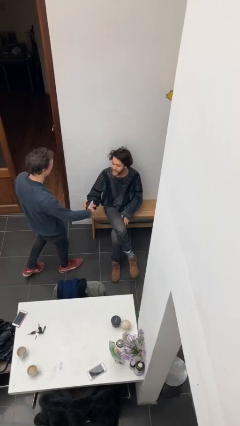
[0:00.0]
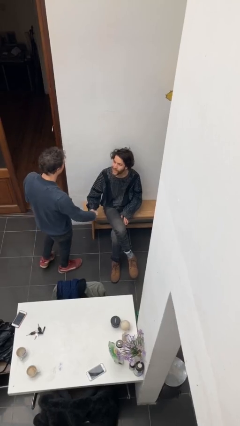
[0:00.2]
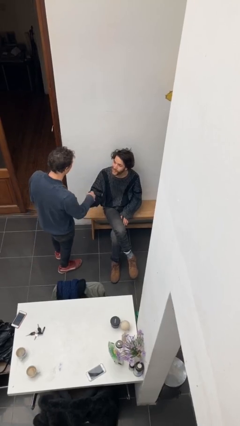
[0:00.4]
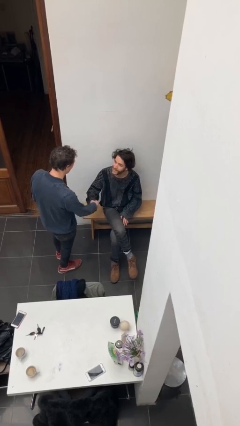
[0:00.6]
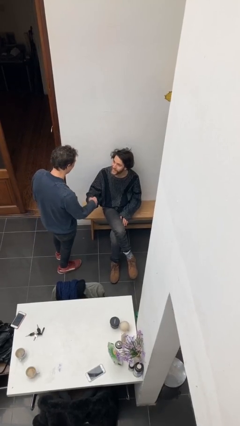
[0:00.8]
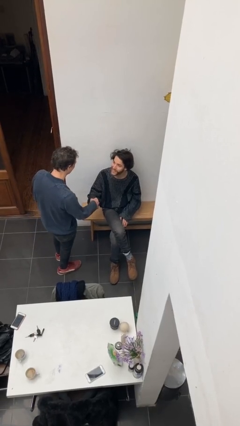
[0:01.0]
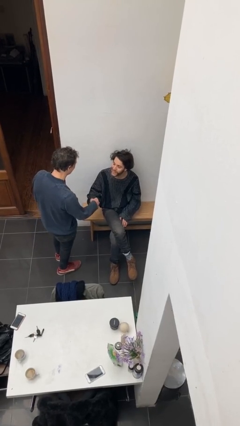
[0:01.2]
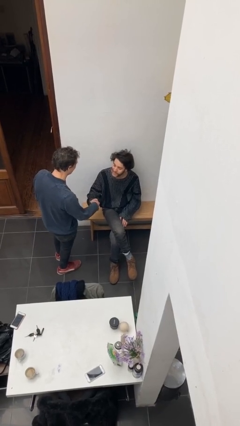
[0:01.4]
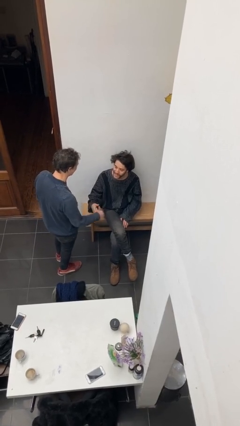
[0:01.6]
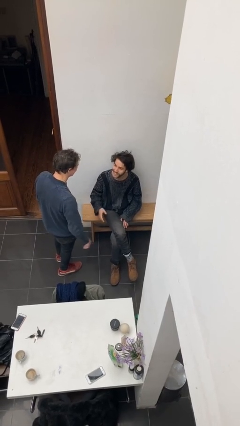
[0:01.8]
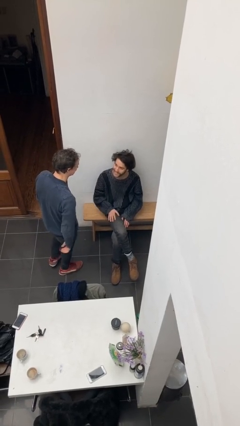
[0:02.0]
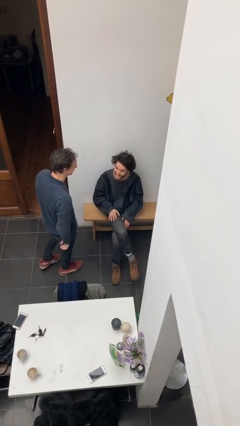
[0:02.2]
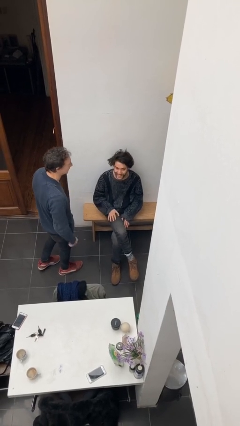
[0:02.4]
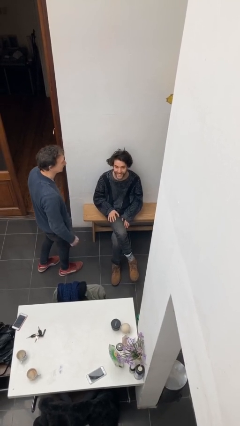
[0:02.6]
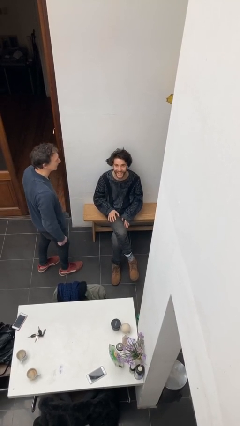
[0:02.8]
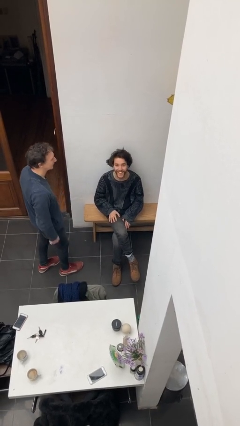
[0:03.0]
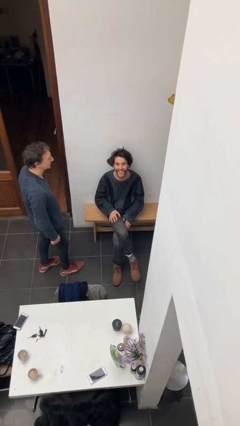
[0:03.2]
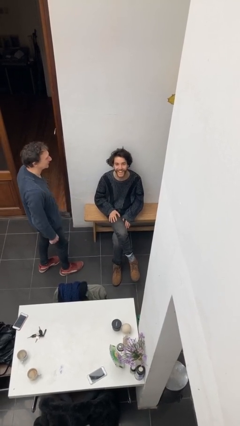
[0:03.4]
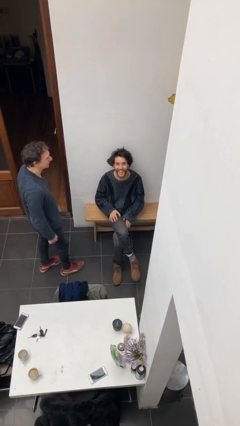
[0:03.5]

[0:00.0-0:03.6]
person shakes hand

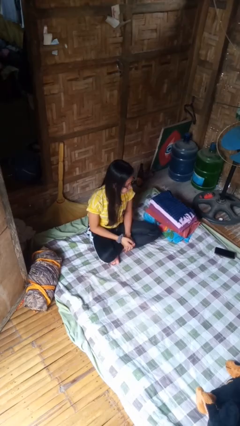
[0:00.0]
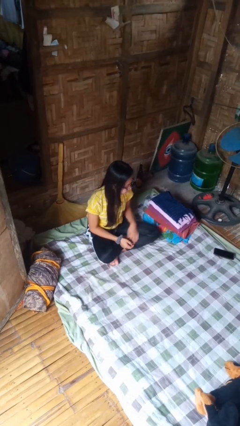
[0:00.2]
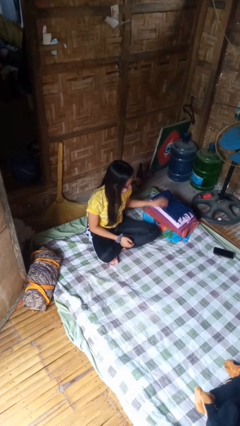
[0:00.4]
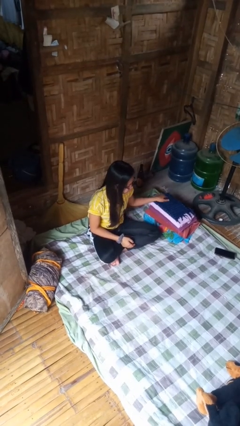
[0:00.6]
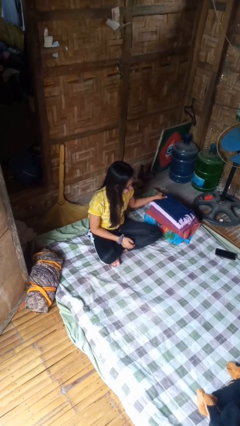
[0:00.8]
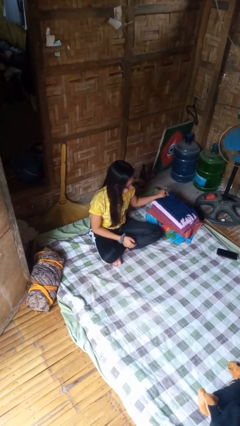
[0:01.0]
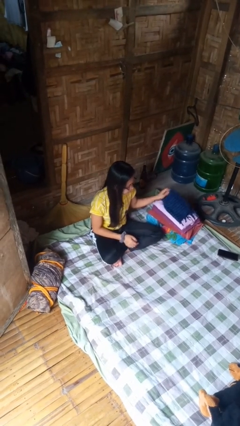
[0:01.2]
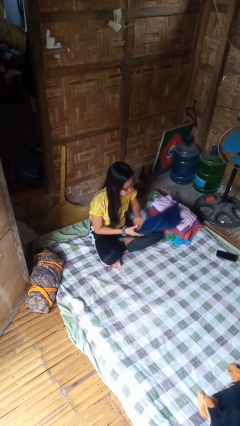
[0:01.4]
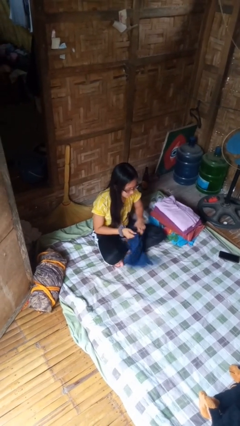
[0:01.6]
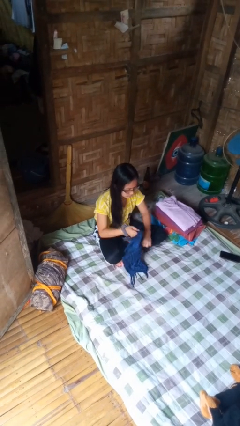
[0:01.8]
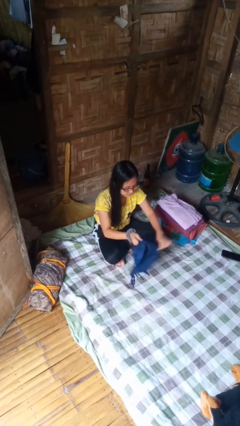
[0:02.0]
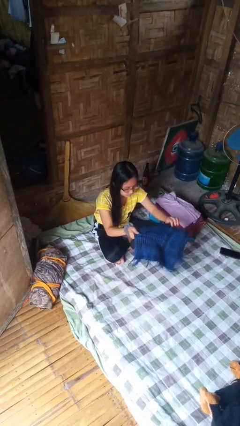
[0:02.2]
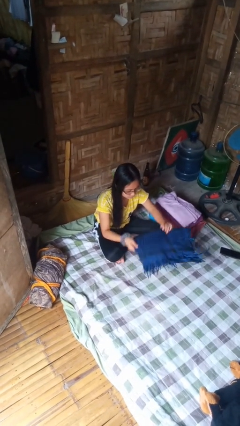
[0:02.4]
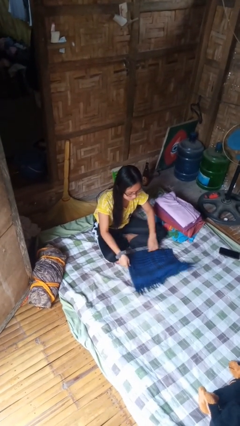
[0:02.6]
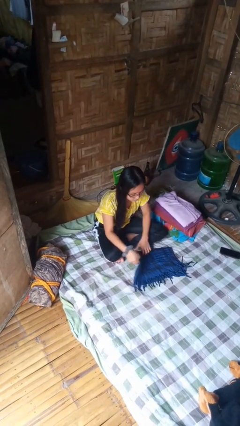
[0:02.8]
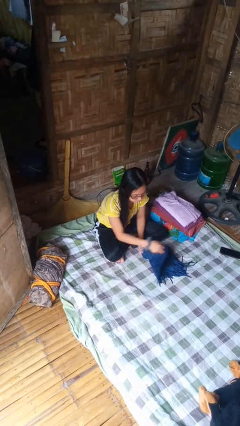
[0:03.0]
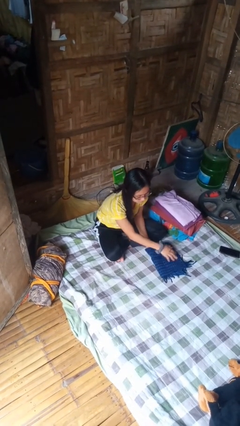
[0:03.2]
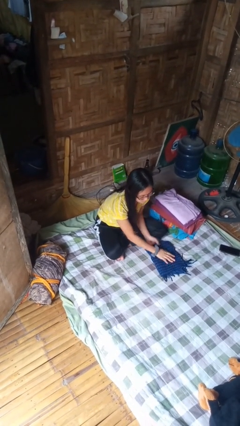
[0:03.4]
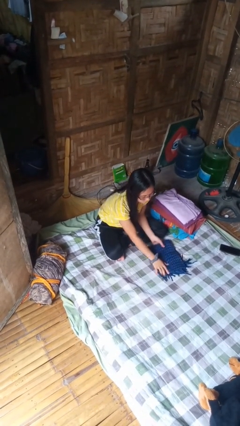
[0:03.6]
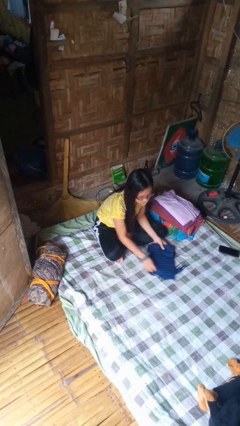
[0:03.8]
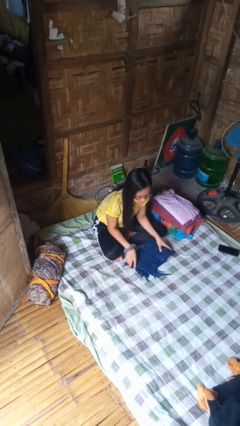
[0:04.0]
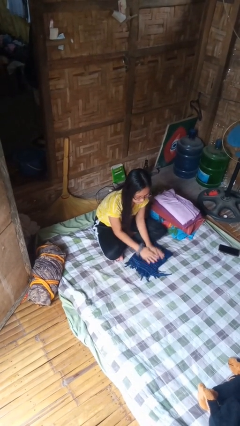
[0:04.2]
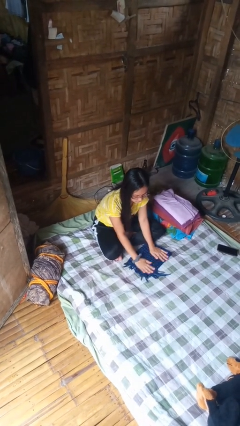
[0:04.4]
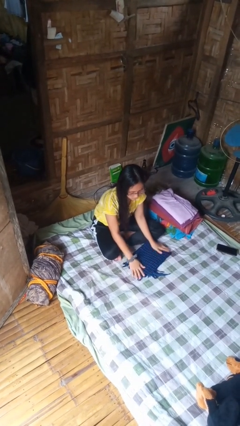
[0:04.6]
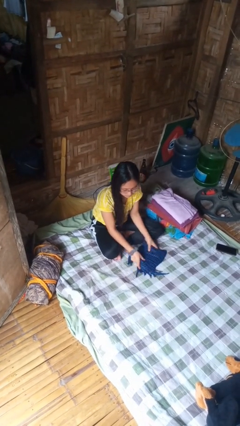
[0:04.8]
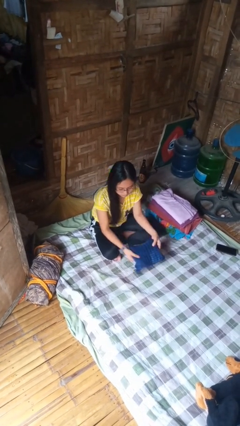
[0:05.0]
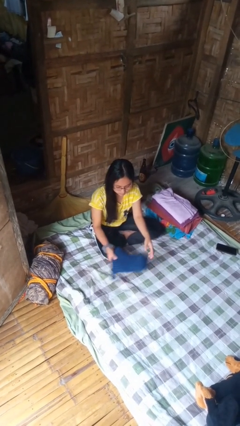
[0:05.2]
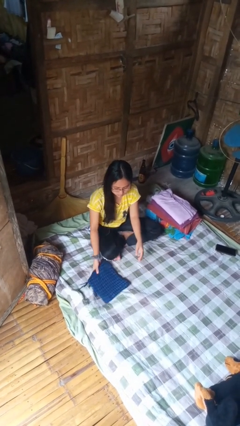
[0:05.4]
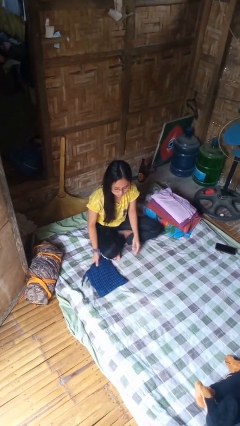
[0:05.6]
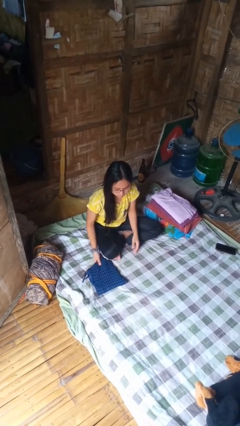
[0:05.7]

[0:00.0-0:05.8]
person folds towel

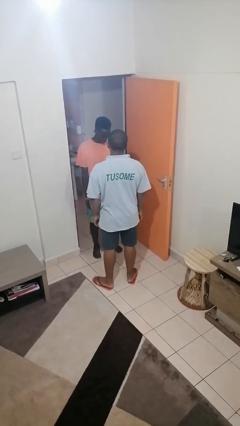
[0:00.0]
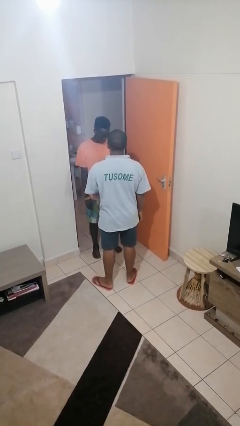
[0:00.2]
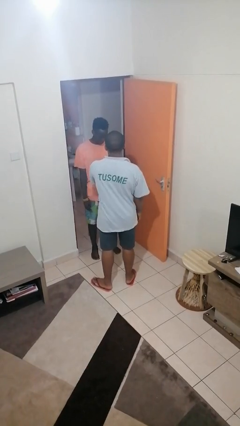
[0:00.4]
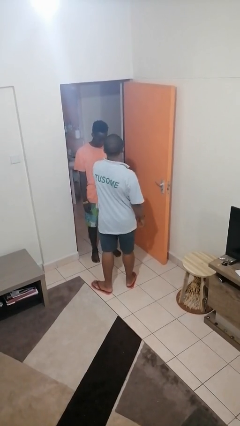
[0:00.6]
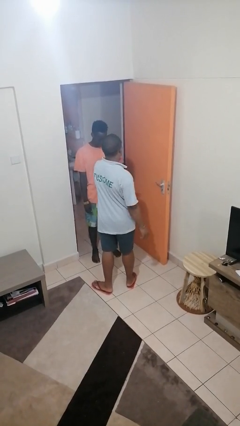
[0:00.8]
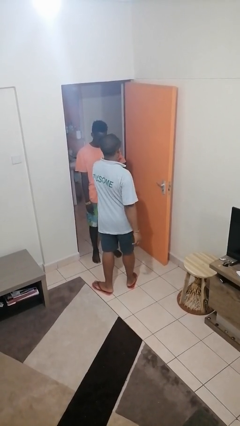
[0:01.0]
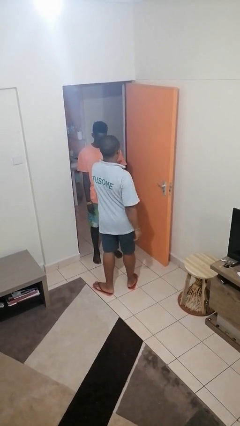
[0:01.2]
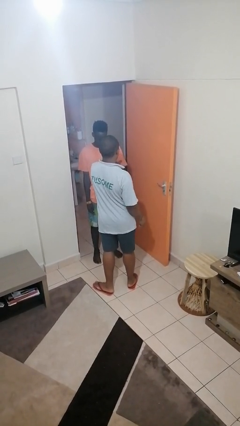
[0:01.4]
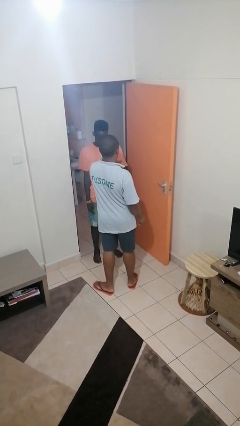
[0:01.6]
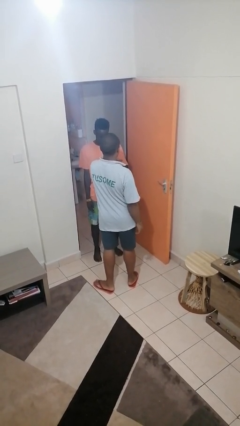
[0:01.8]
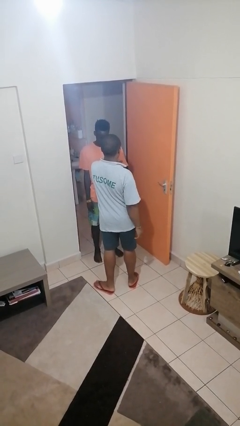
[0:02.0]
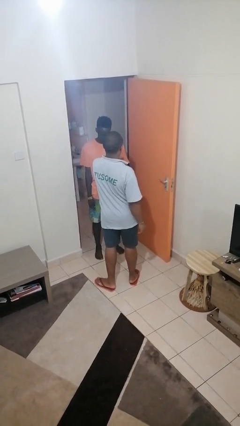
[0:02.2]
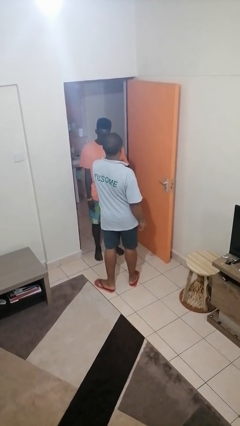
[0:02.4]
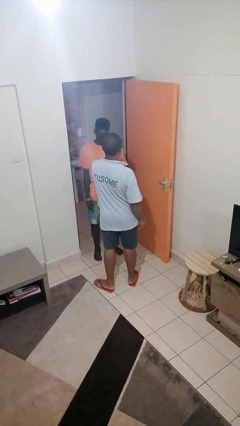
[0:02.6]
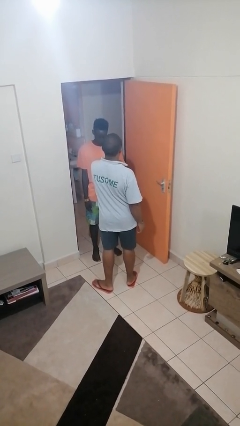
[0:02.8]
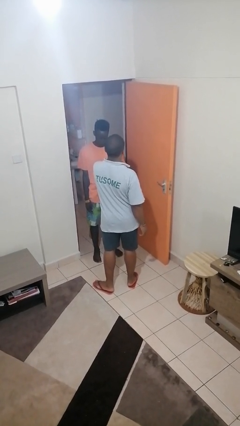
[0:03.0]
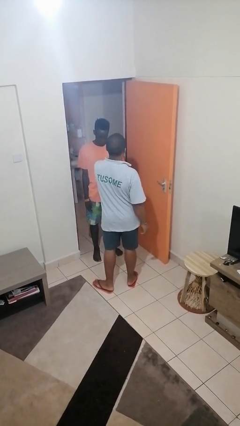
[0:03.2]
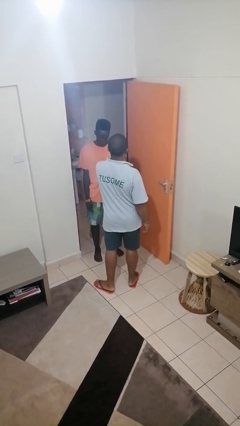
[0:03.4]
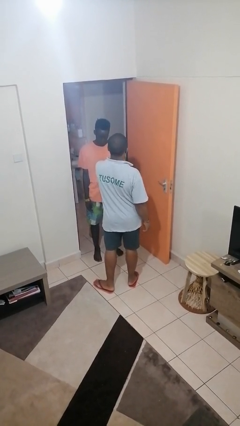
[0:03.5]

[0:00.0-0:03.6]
person grabs person by bicep

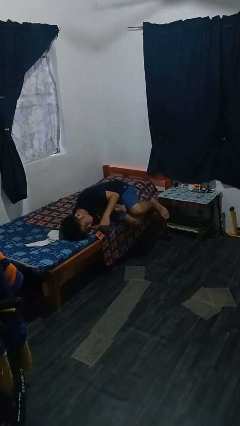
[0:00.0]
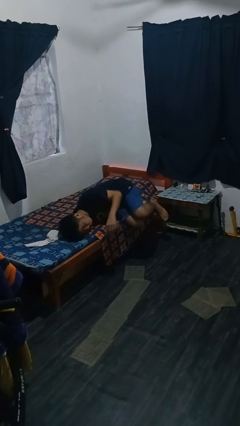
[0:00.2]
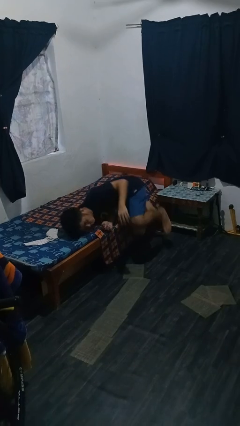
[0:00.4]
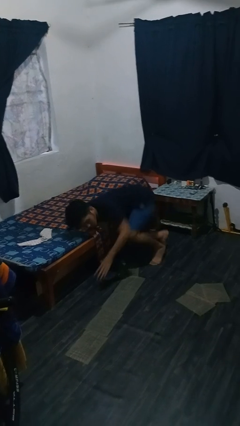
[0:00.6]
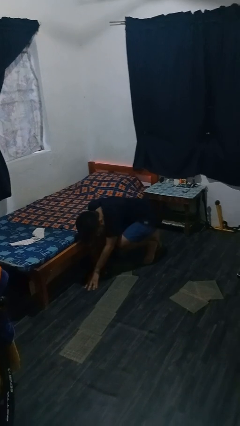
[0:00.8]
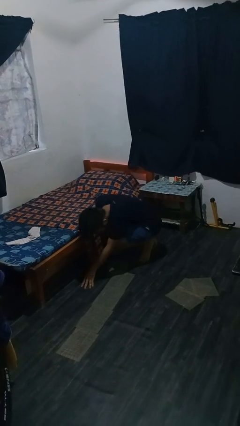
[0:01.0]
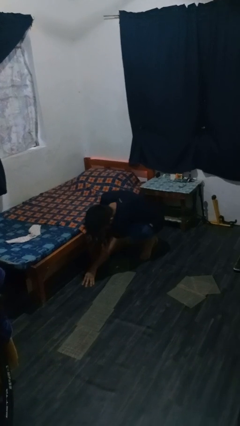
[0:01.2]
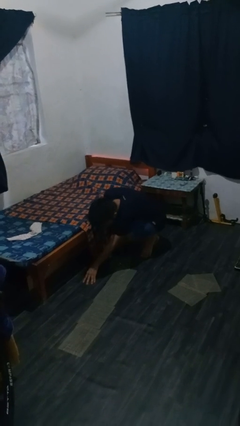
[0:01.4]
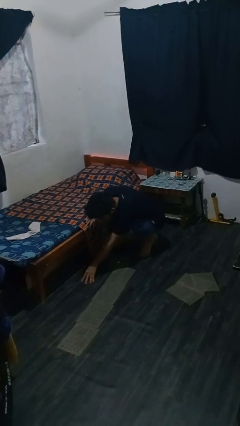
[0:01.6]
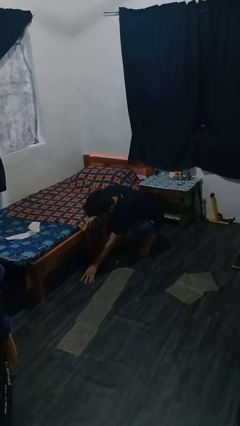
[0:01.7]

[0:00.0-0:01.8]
person falls from bed

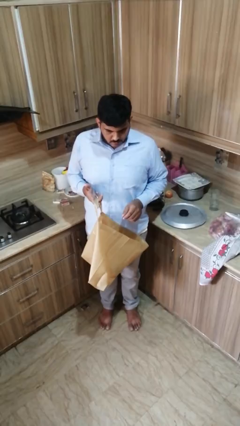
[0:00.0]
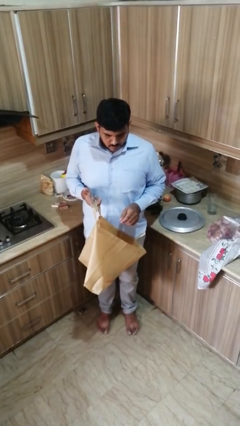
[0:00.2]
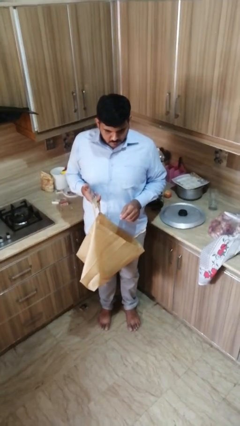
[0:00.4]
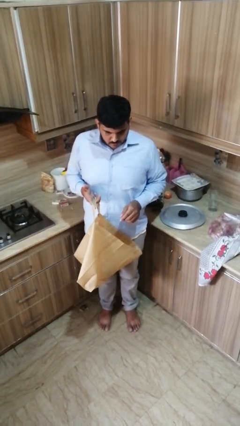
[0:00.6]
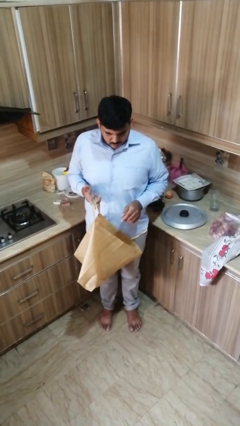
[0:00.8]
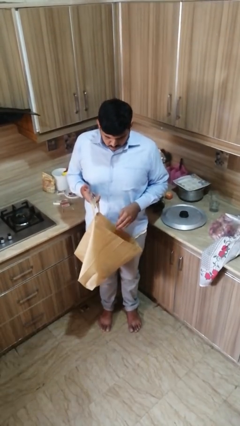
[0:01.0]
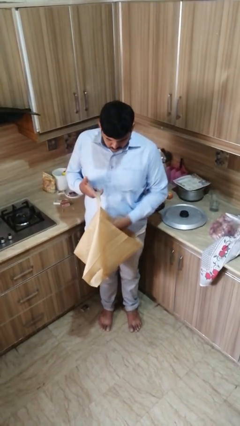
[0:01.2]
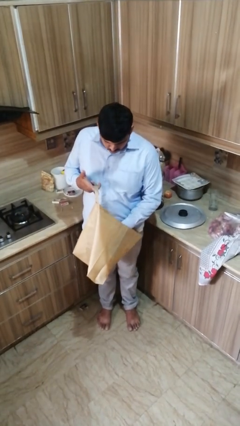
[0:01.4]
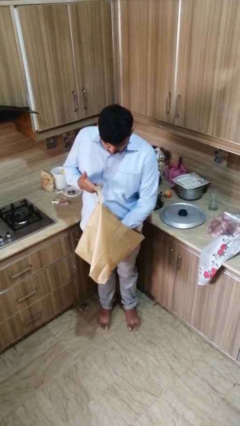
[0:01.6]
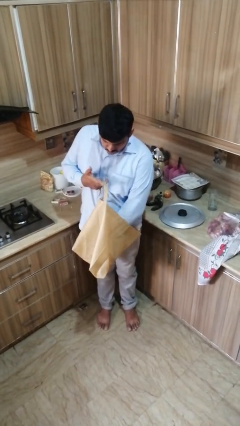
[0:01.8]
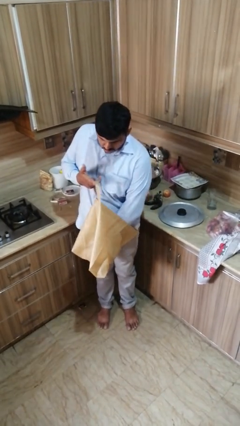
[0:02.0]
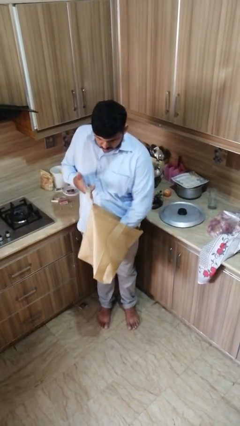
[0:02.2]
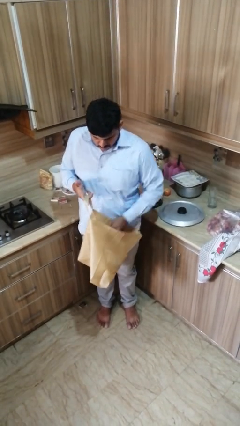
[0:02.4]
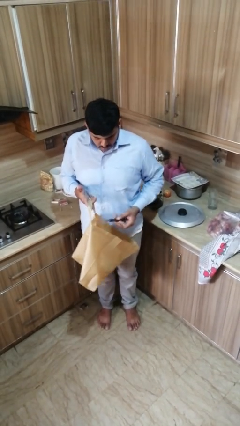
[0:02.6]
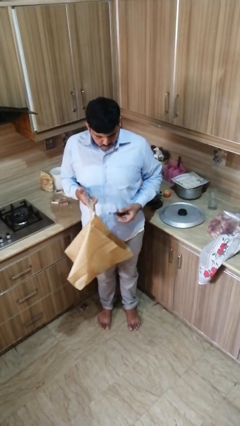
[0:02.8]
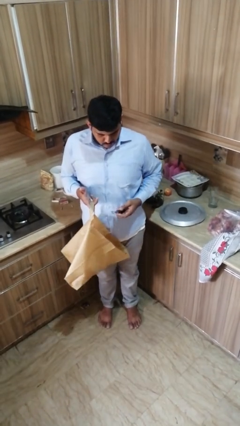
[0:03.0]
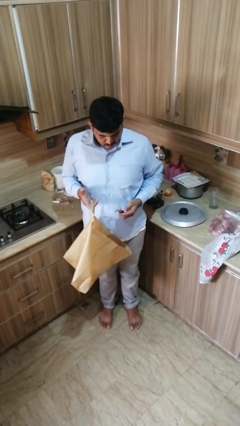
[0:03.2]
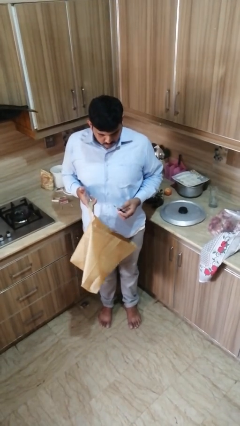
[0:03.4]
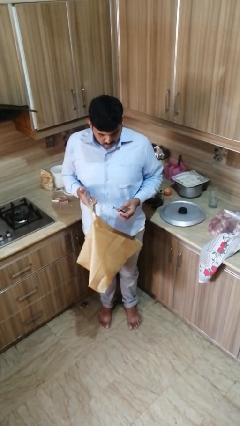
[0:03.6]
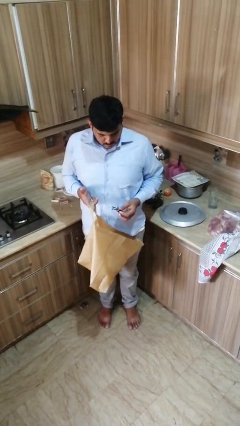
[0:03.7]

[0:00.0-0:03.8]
person takes object from bag
